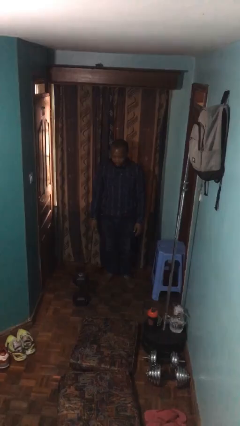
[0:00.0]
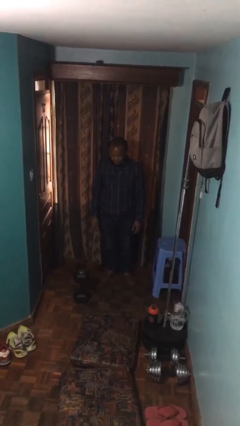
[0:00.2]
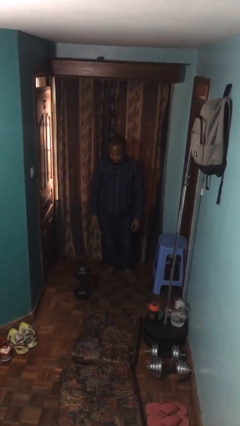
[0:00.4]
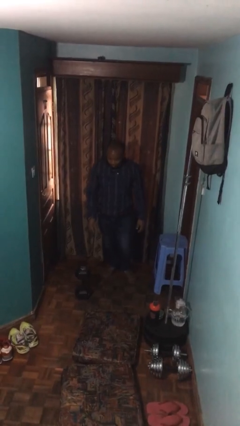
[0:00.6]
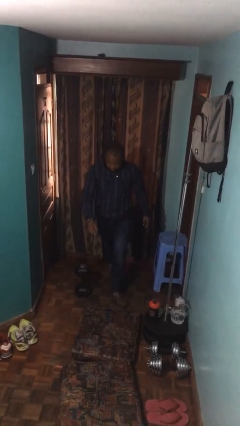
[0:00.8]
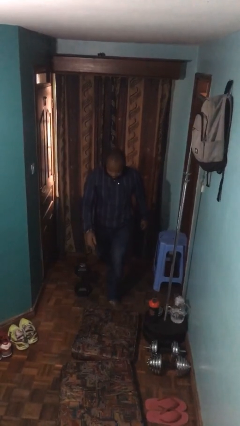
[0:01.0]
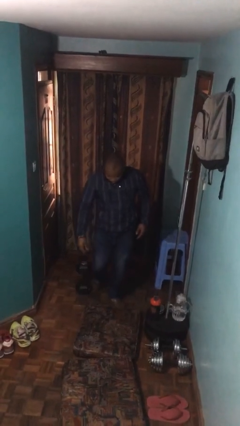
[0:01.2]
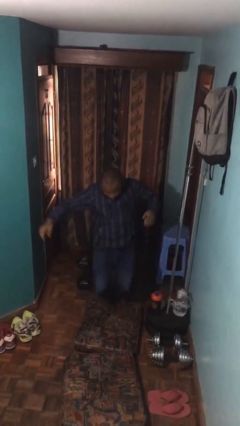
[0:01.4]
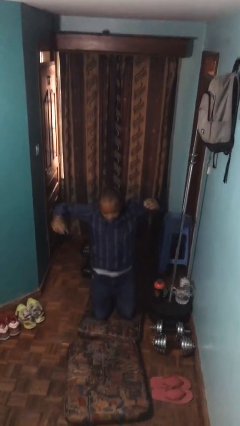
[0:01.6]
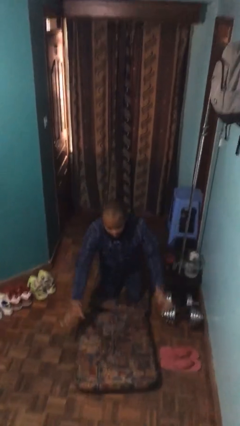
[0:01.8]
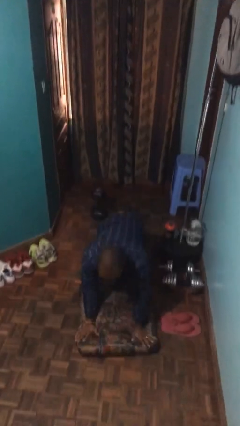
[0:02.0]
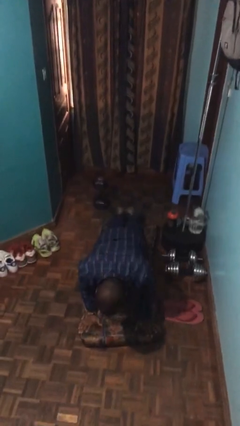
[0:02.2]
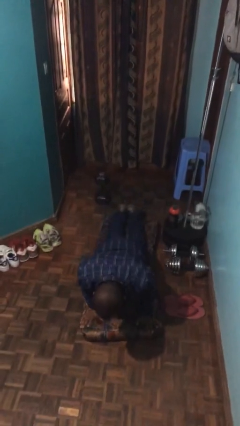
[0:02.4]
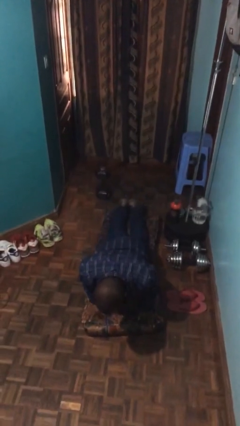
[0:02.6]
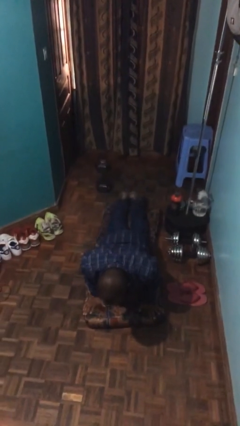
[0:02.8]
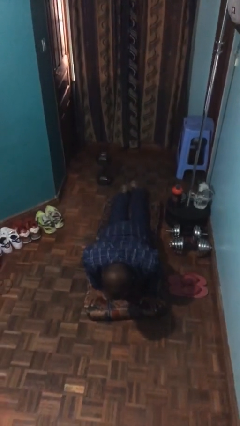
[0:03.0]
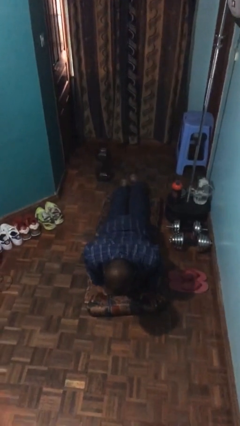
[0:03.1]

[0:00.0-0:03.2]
person trips on object on floor

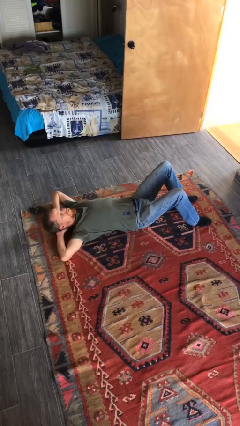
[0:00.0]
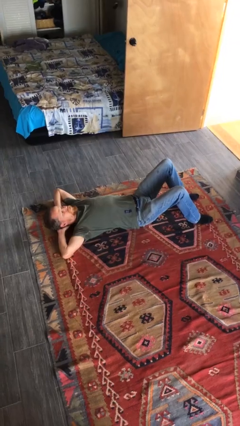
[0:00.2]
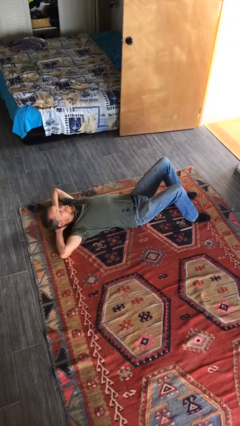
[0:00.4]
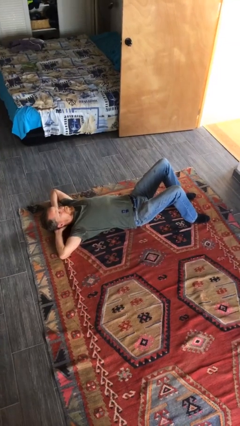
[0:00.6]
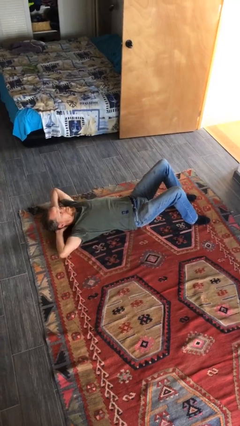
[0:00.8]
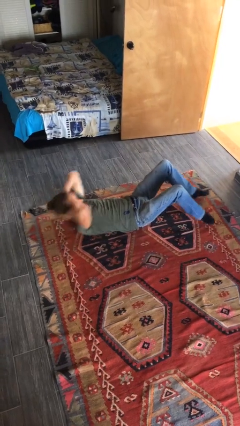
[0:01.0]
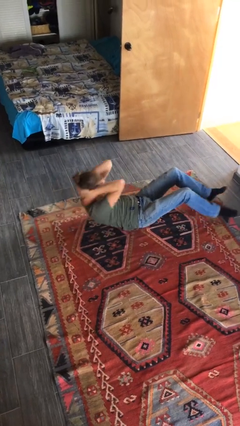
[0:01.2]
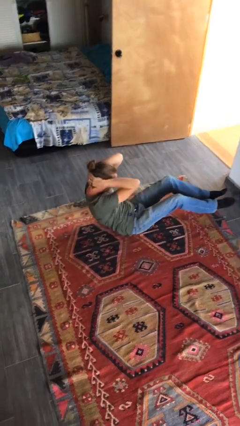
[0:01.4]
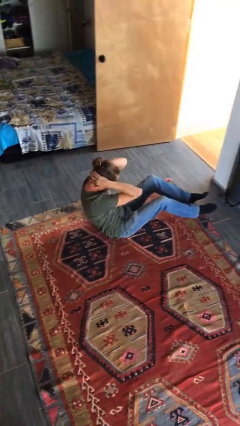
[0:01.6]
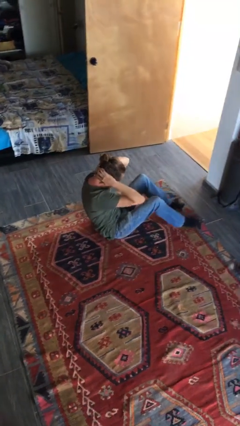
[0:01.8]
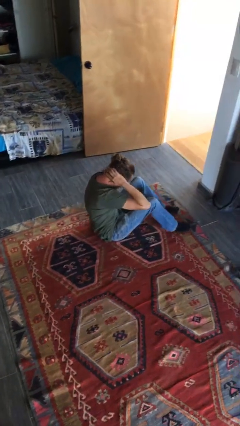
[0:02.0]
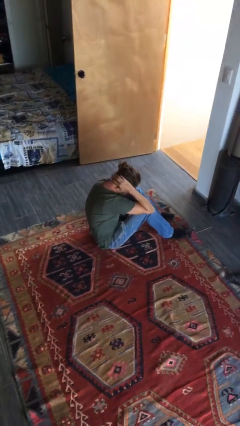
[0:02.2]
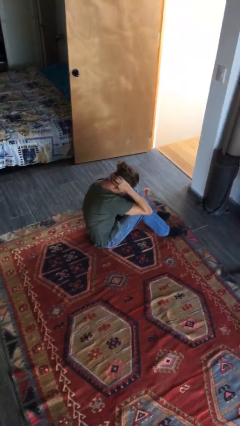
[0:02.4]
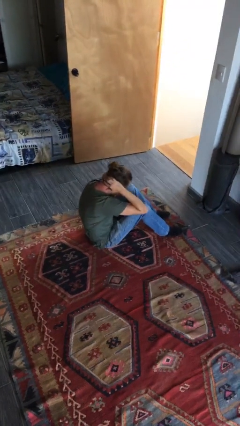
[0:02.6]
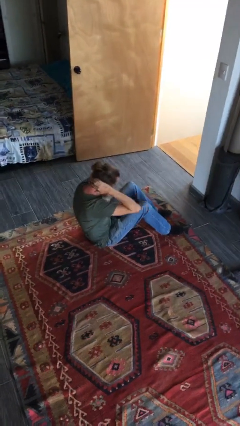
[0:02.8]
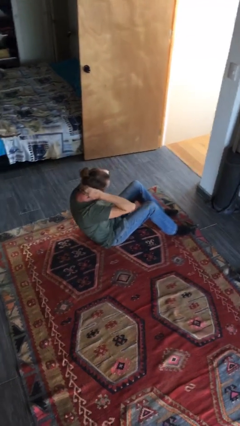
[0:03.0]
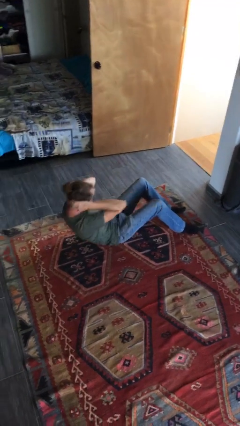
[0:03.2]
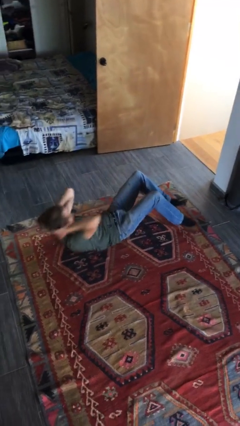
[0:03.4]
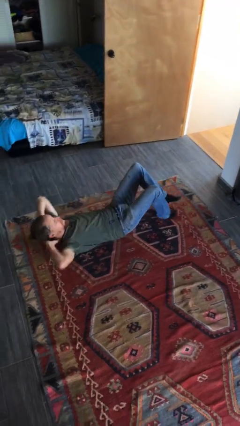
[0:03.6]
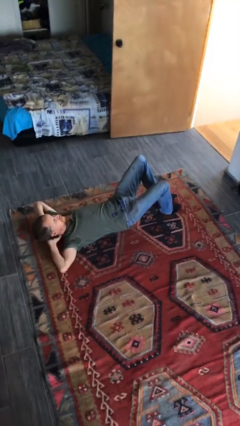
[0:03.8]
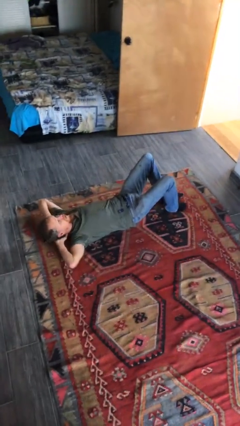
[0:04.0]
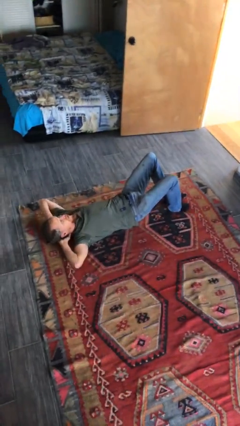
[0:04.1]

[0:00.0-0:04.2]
person exercises with situp

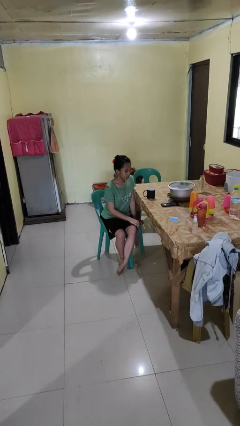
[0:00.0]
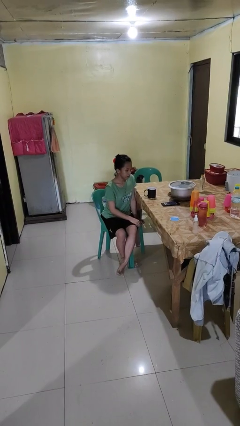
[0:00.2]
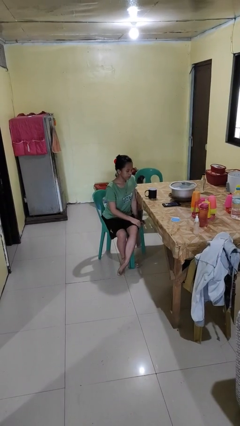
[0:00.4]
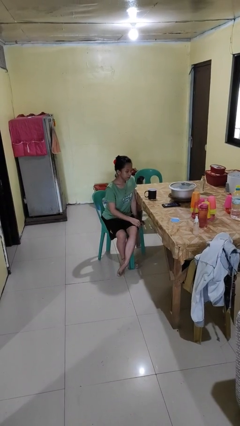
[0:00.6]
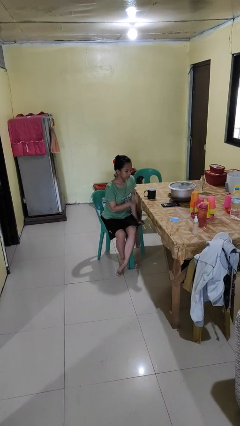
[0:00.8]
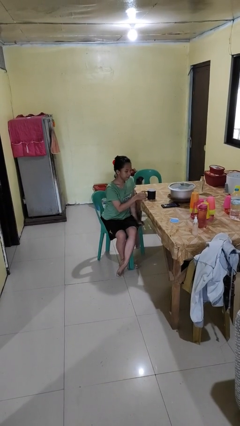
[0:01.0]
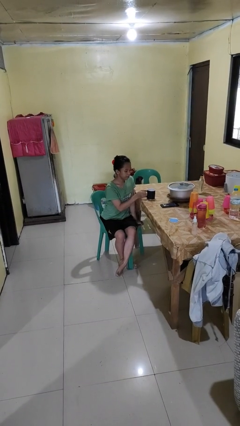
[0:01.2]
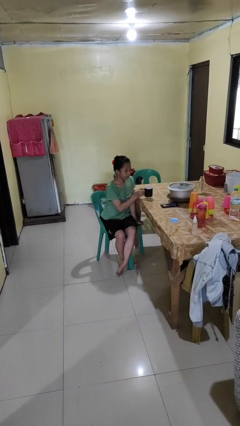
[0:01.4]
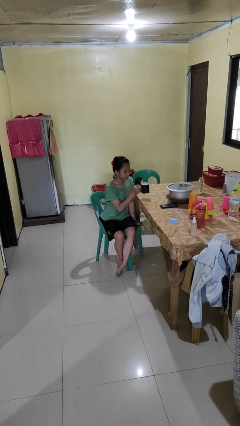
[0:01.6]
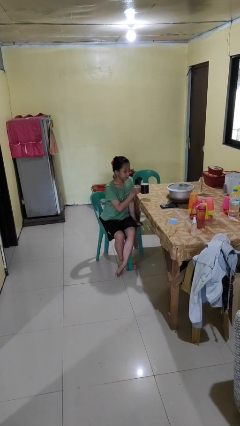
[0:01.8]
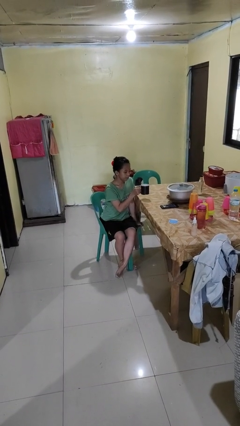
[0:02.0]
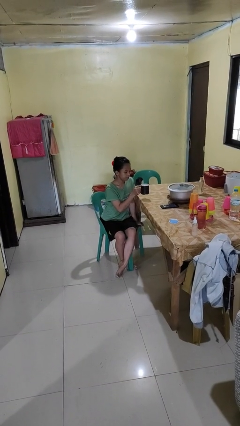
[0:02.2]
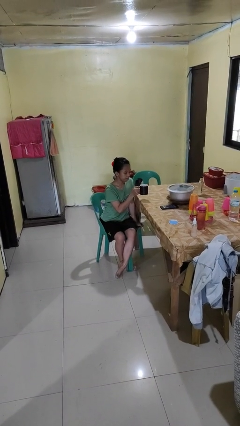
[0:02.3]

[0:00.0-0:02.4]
person picks up object from table

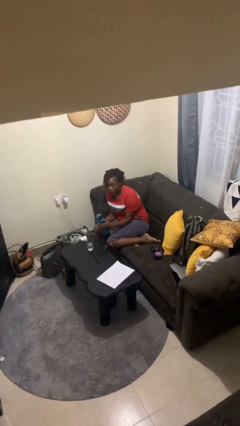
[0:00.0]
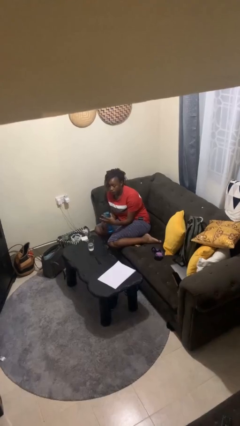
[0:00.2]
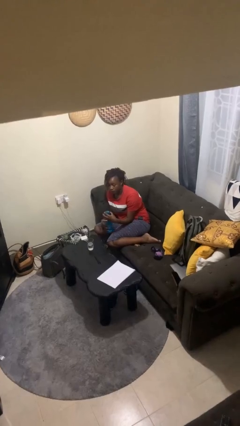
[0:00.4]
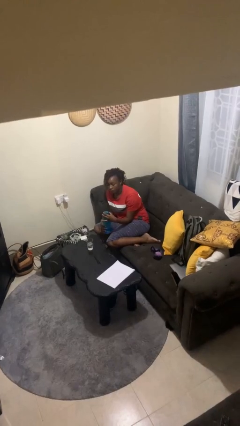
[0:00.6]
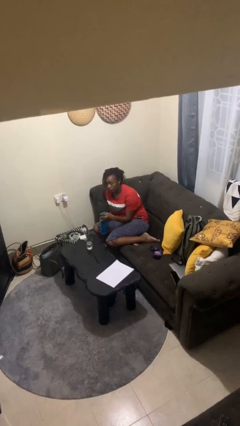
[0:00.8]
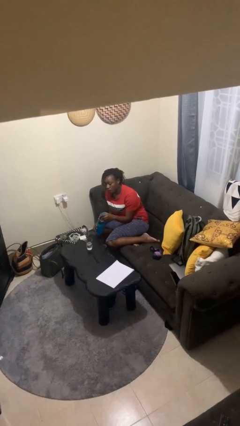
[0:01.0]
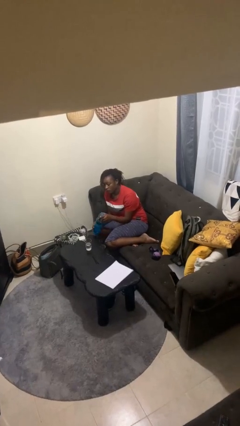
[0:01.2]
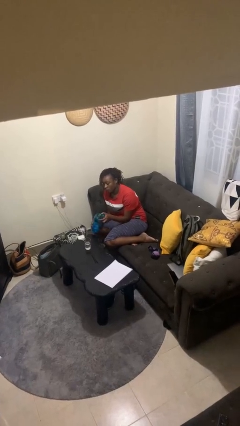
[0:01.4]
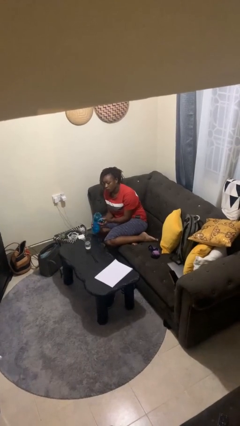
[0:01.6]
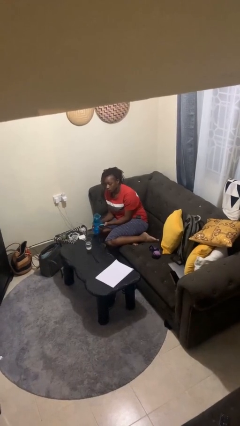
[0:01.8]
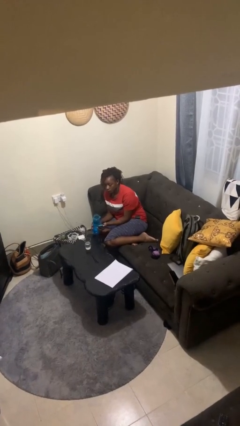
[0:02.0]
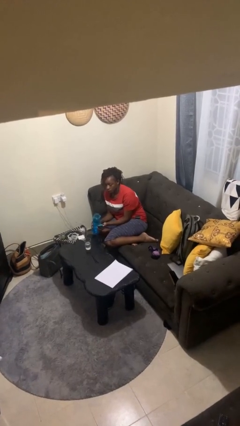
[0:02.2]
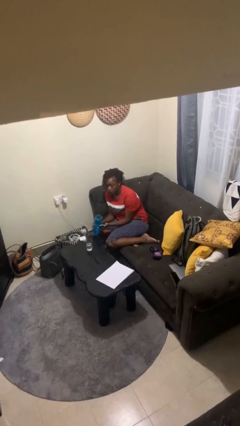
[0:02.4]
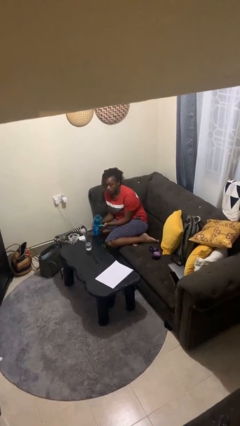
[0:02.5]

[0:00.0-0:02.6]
person unscrews lid from bottle

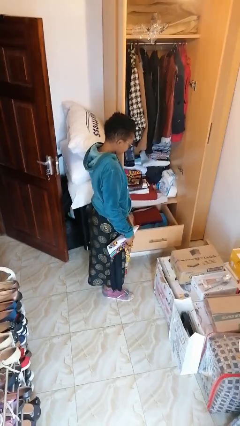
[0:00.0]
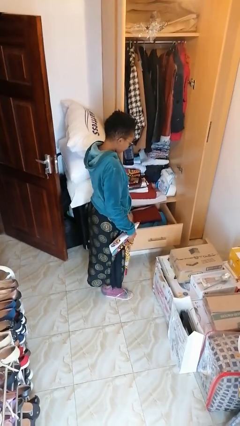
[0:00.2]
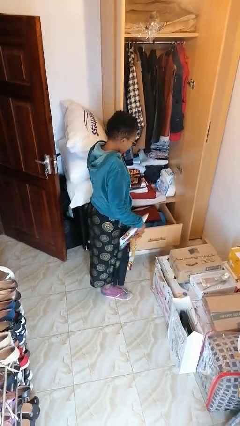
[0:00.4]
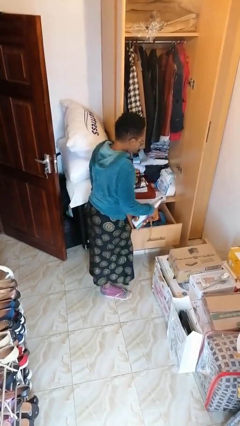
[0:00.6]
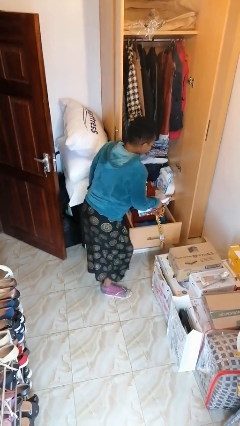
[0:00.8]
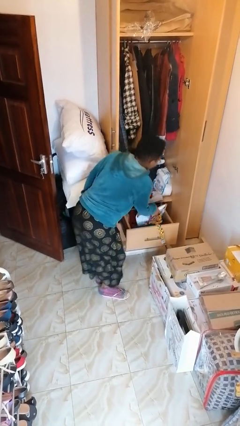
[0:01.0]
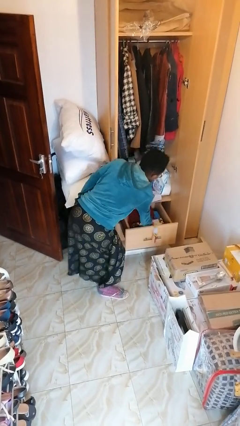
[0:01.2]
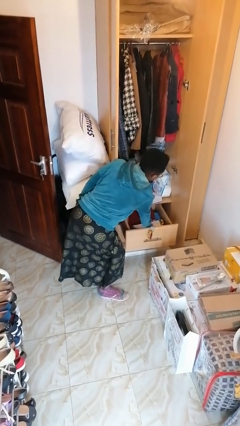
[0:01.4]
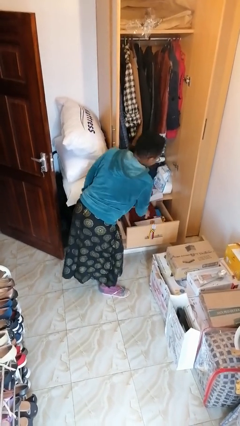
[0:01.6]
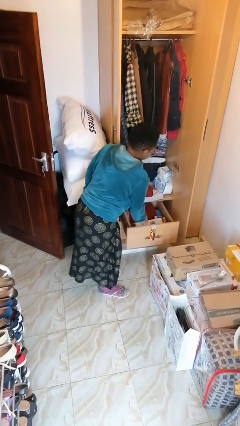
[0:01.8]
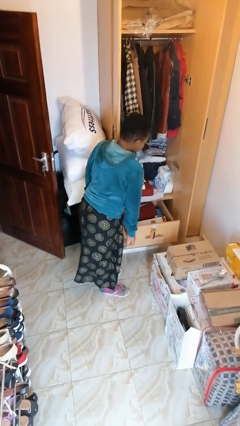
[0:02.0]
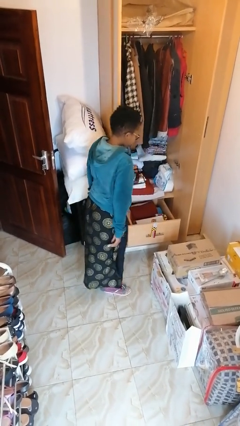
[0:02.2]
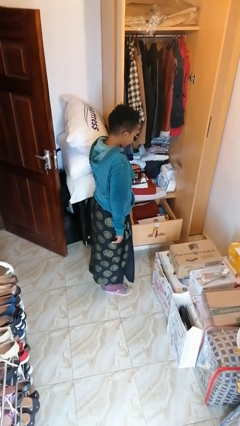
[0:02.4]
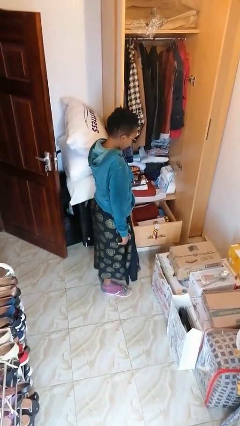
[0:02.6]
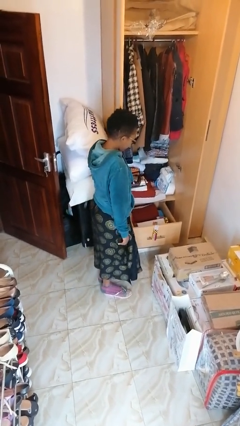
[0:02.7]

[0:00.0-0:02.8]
person puts clothes into dresser

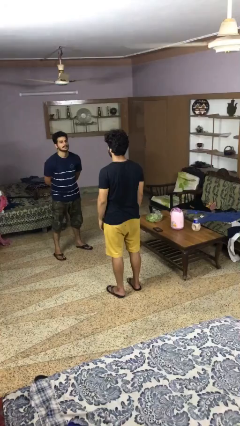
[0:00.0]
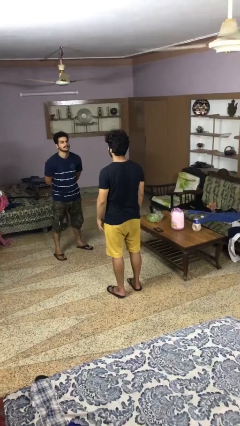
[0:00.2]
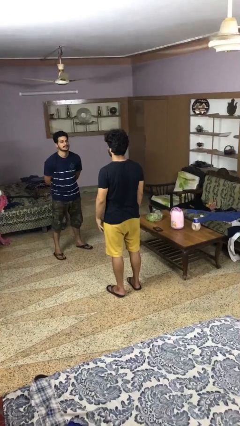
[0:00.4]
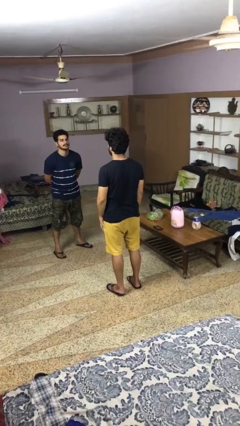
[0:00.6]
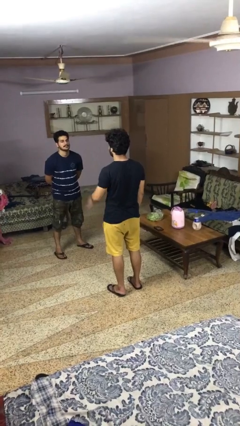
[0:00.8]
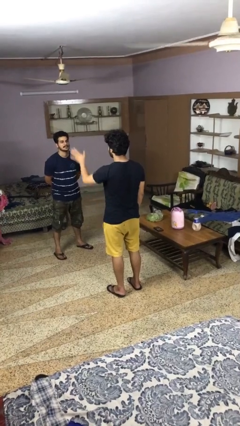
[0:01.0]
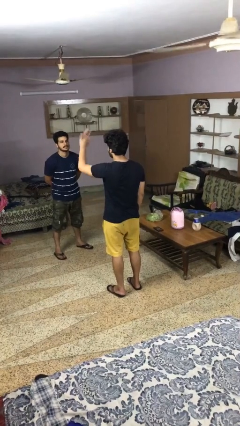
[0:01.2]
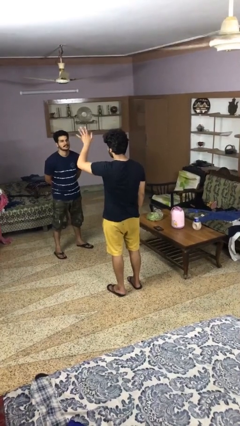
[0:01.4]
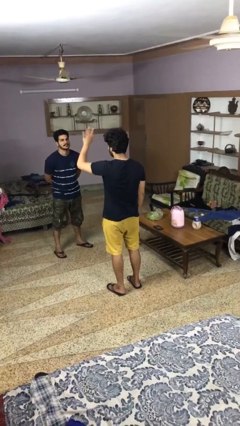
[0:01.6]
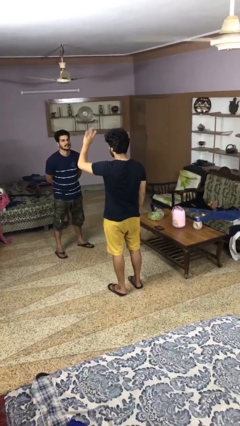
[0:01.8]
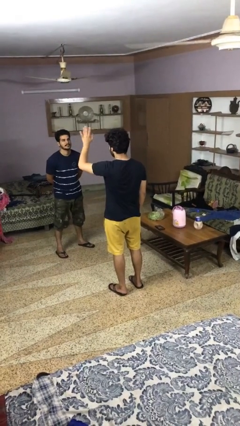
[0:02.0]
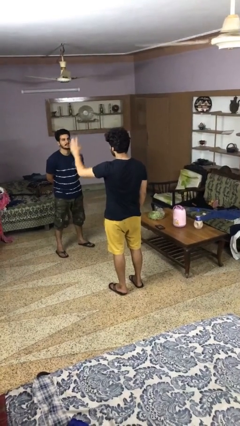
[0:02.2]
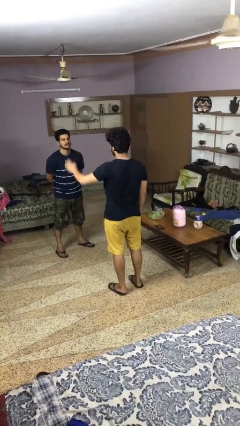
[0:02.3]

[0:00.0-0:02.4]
person waves at person
